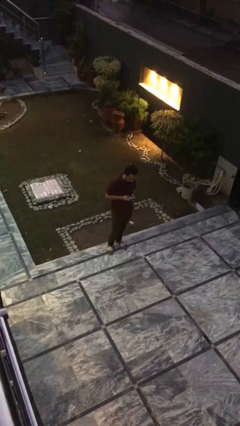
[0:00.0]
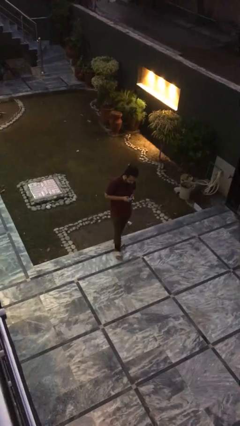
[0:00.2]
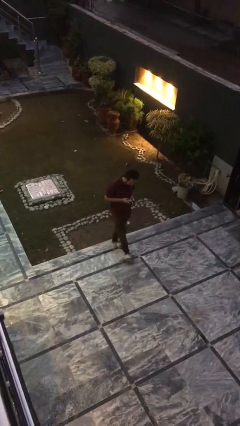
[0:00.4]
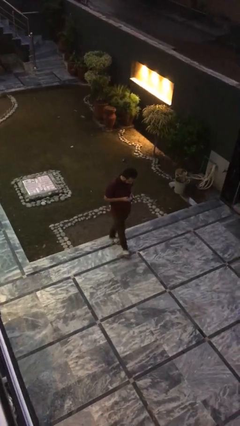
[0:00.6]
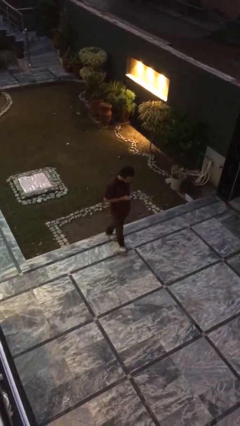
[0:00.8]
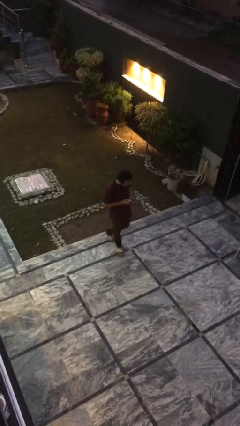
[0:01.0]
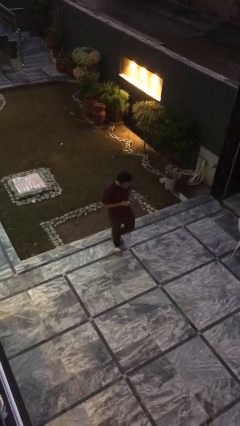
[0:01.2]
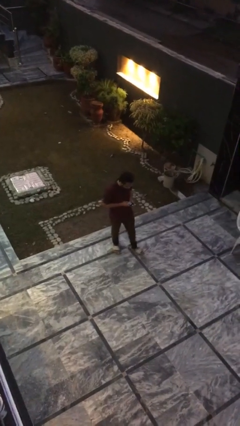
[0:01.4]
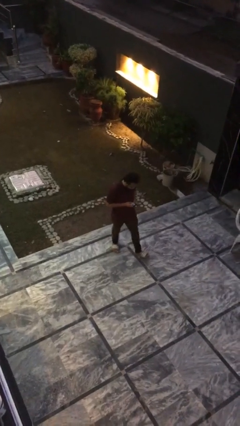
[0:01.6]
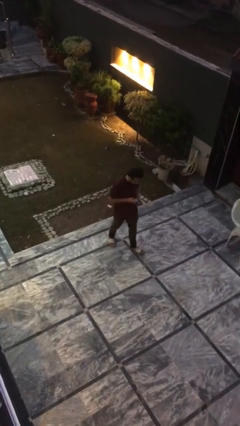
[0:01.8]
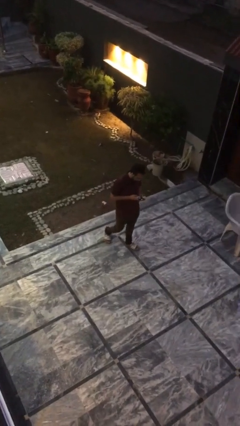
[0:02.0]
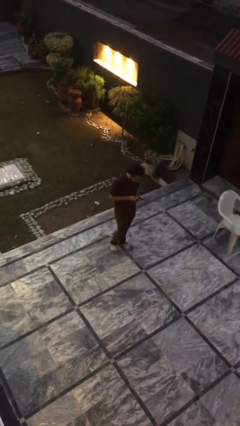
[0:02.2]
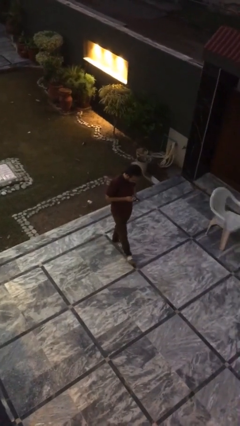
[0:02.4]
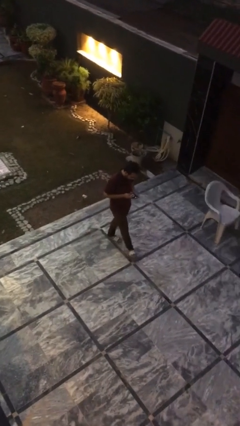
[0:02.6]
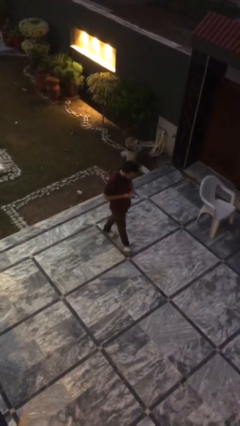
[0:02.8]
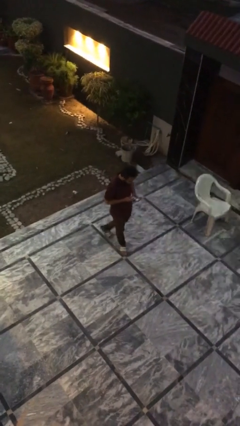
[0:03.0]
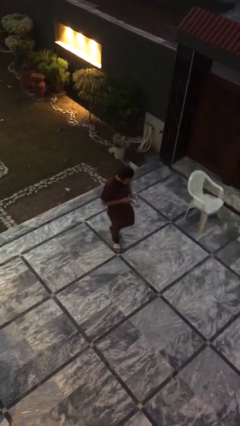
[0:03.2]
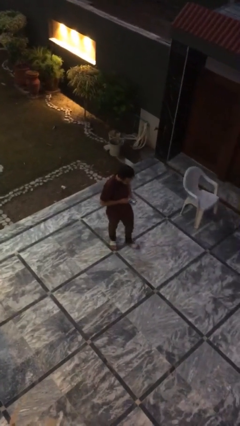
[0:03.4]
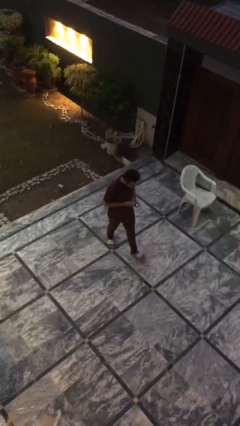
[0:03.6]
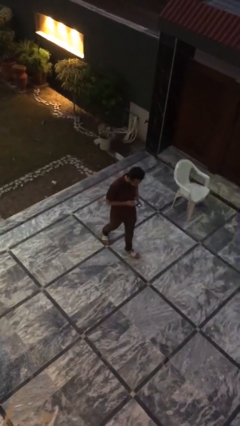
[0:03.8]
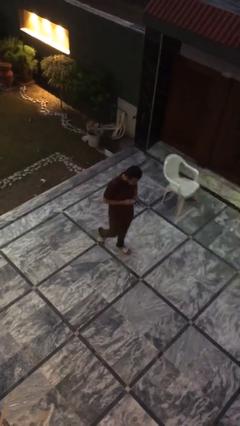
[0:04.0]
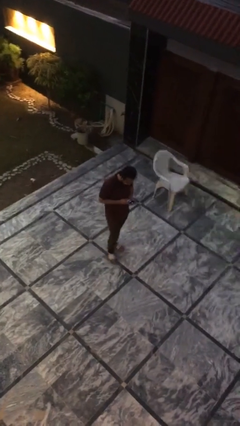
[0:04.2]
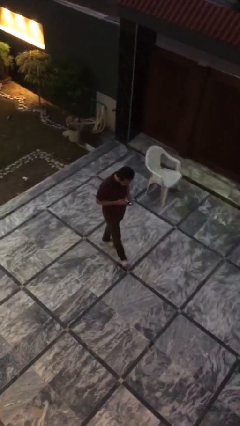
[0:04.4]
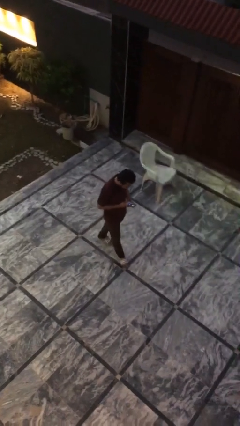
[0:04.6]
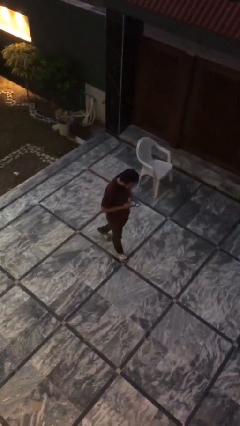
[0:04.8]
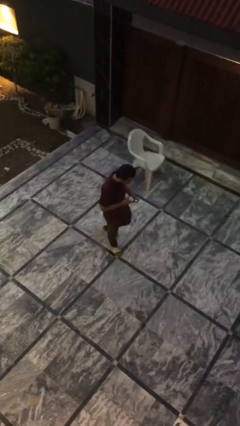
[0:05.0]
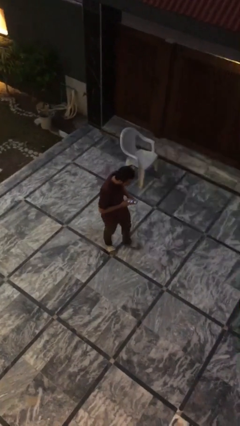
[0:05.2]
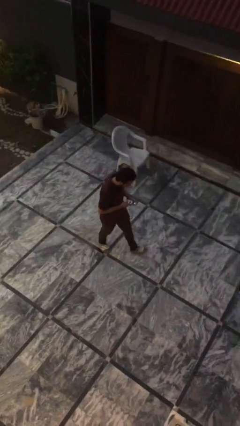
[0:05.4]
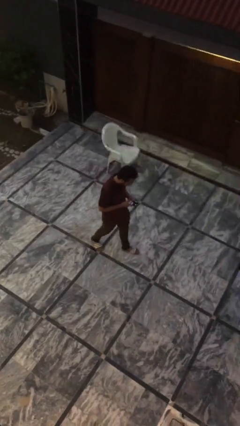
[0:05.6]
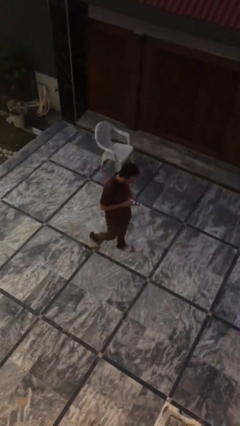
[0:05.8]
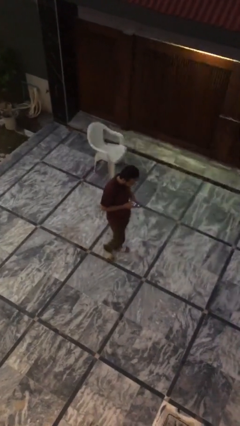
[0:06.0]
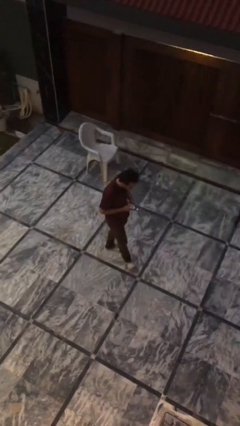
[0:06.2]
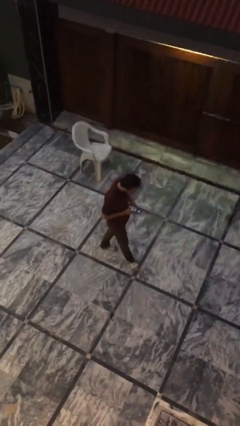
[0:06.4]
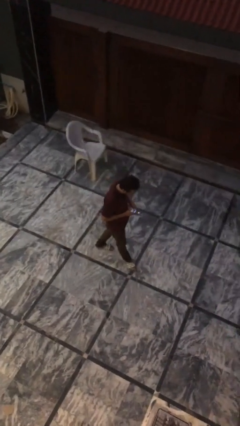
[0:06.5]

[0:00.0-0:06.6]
person texts on phone

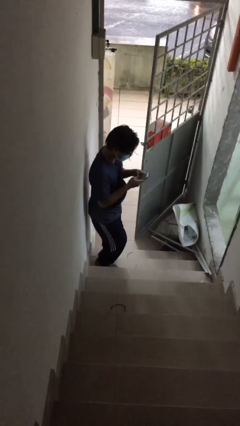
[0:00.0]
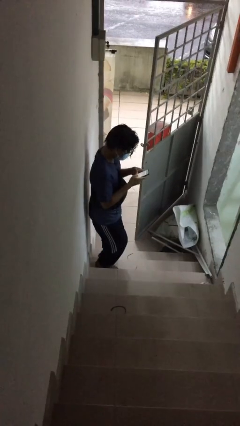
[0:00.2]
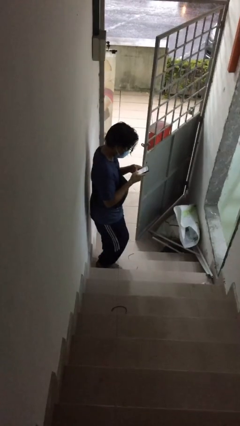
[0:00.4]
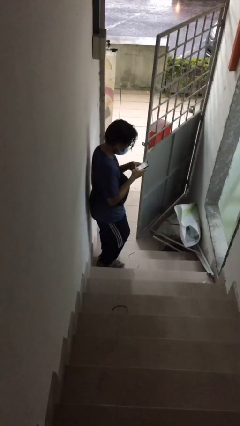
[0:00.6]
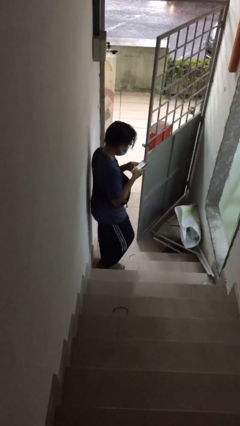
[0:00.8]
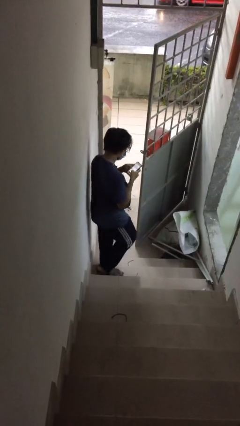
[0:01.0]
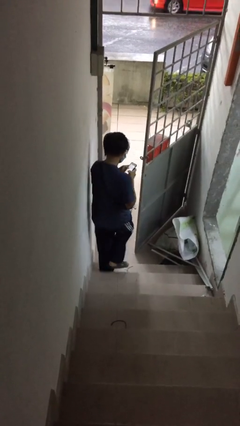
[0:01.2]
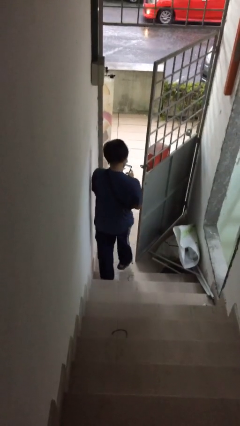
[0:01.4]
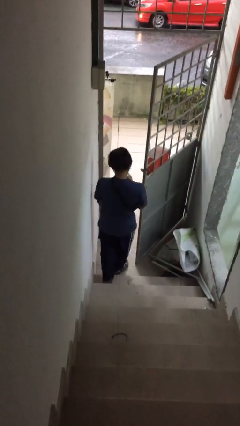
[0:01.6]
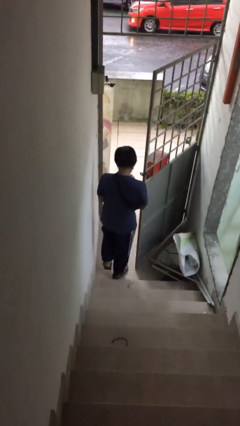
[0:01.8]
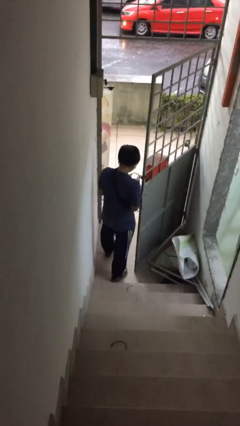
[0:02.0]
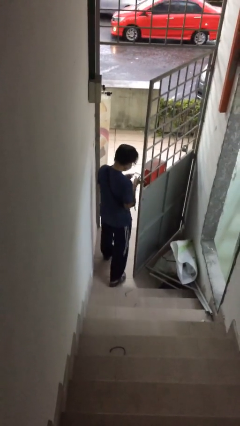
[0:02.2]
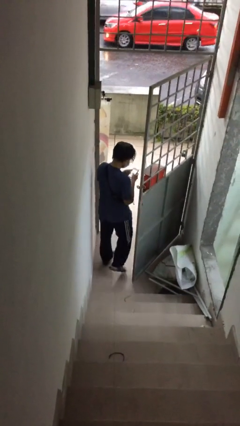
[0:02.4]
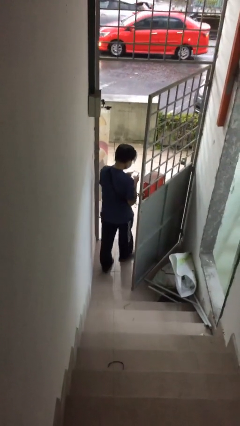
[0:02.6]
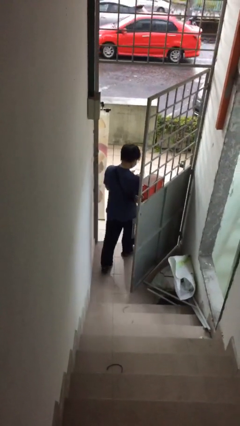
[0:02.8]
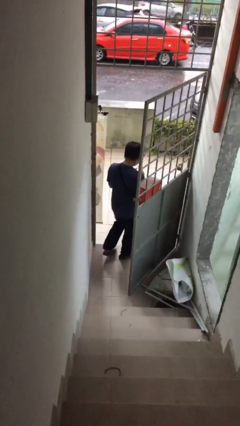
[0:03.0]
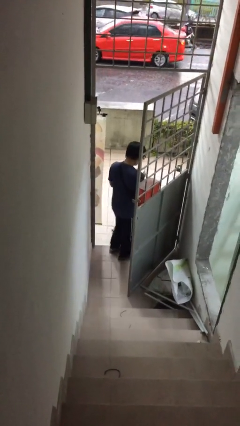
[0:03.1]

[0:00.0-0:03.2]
person exits scene through structure

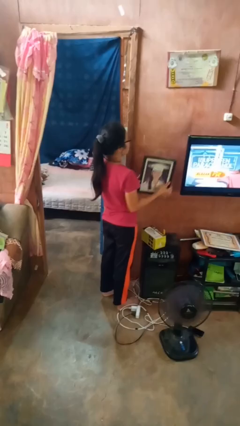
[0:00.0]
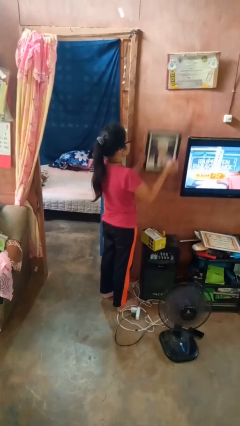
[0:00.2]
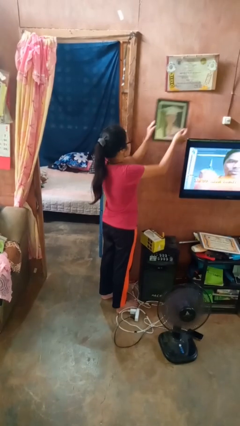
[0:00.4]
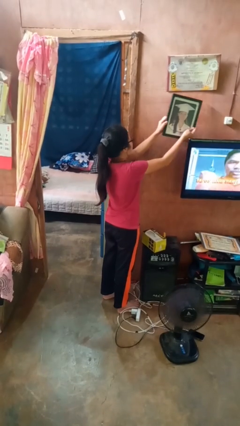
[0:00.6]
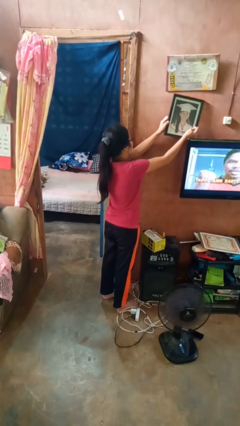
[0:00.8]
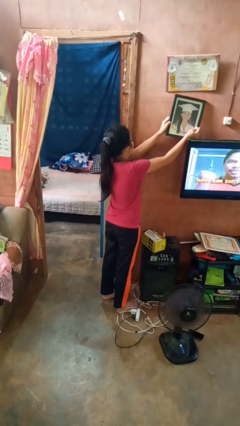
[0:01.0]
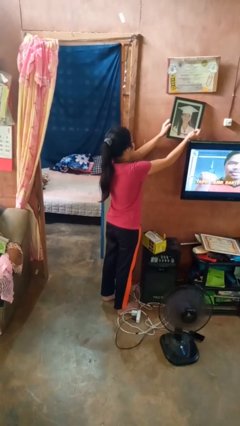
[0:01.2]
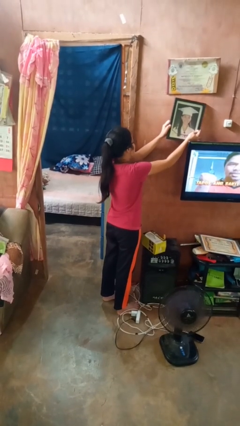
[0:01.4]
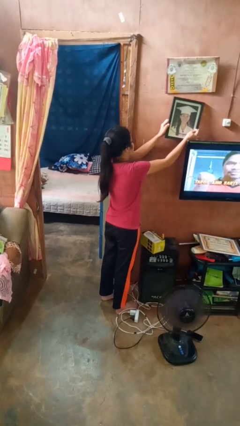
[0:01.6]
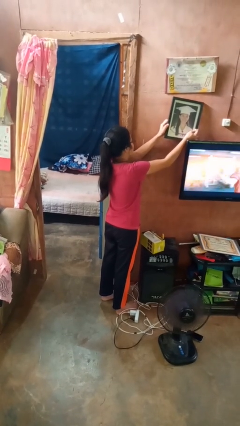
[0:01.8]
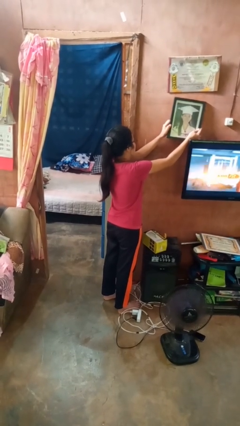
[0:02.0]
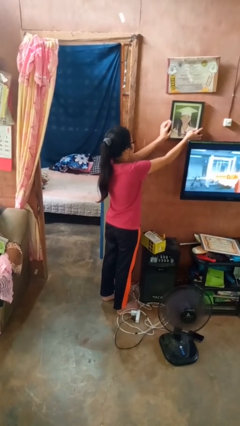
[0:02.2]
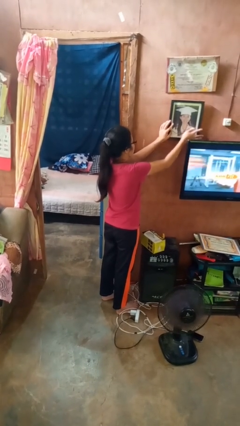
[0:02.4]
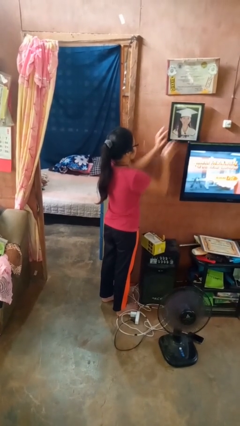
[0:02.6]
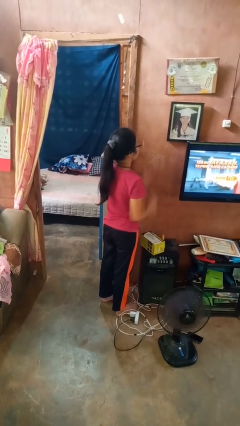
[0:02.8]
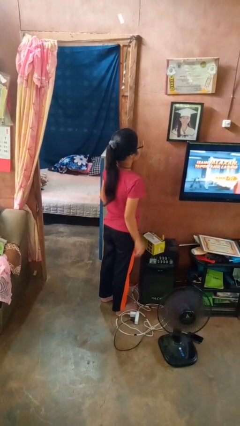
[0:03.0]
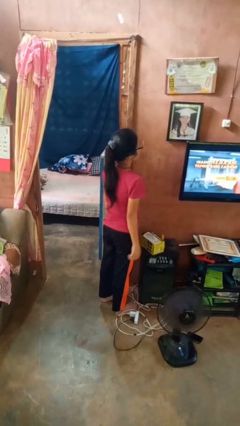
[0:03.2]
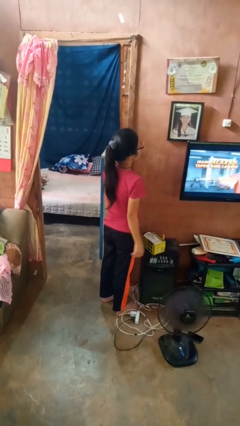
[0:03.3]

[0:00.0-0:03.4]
person puts up picture frame

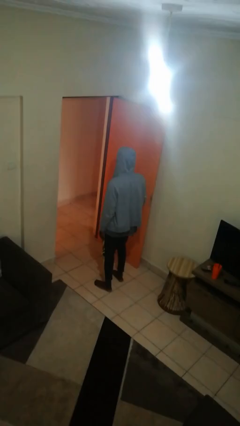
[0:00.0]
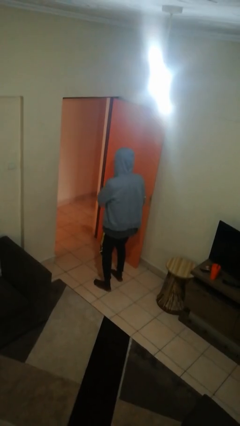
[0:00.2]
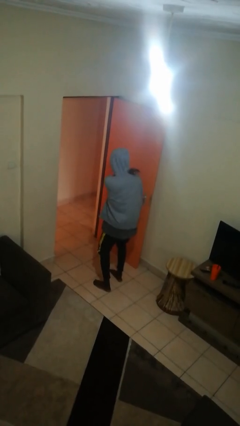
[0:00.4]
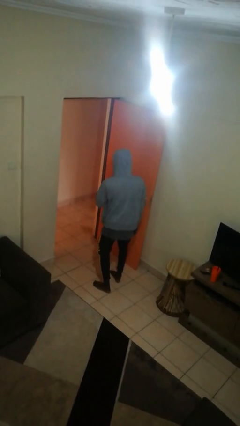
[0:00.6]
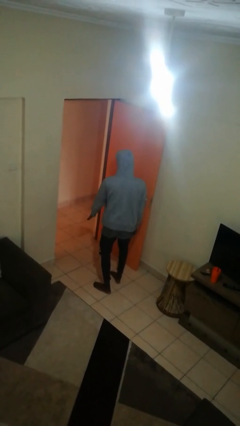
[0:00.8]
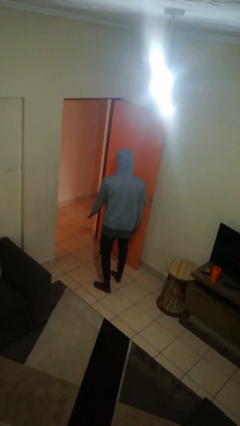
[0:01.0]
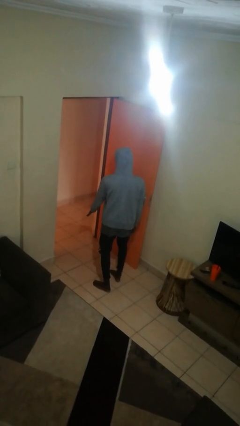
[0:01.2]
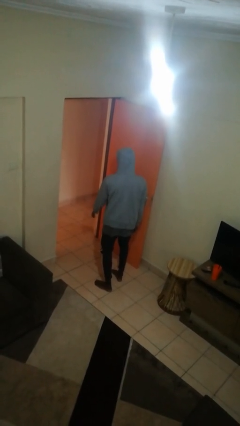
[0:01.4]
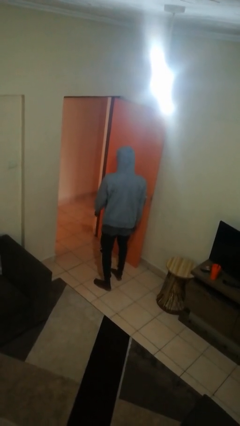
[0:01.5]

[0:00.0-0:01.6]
person karate chop

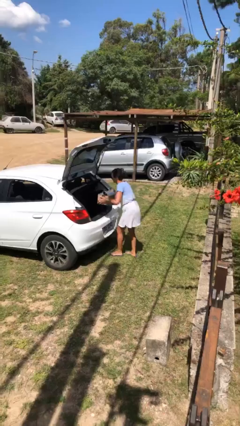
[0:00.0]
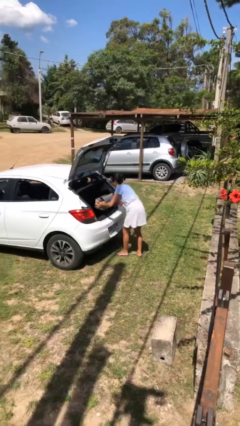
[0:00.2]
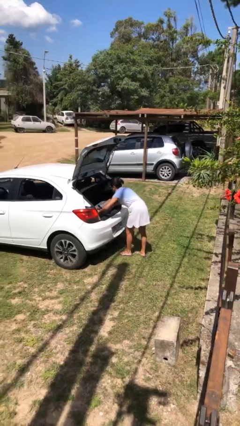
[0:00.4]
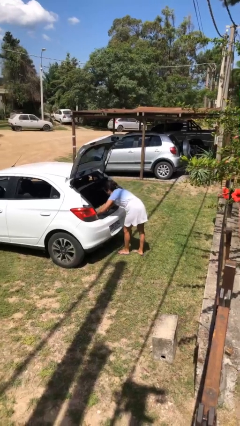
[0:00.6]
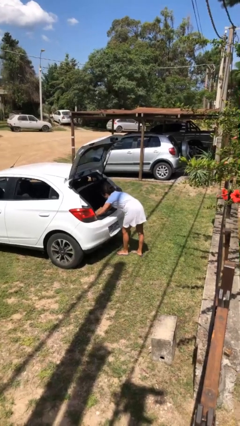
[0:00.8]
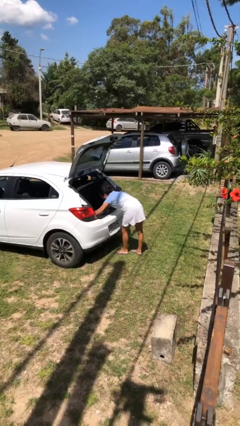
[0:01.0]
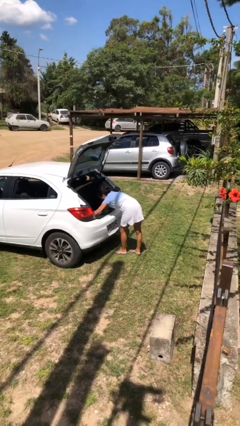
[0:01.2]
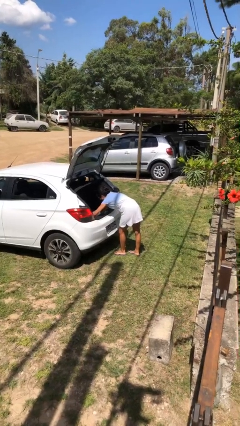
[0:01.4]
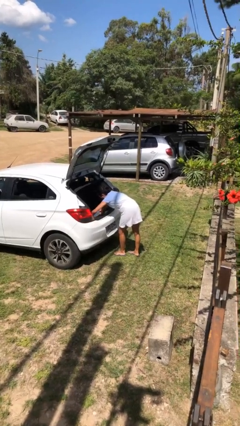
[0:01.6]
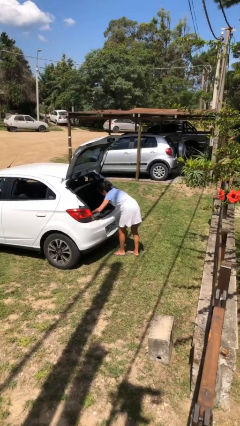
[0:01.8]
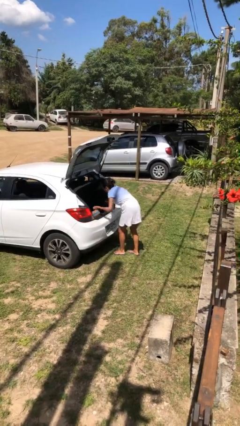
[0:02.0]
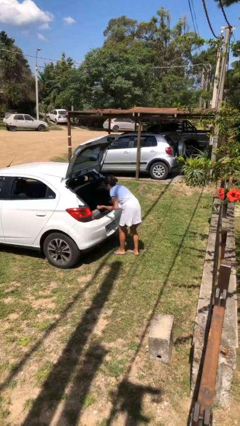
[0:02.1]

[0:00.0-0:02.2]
person loads car

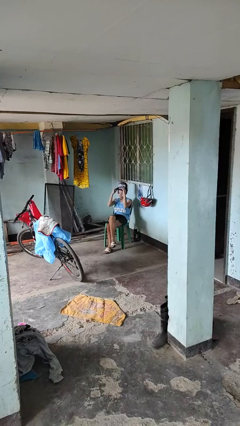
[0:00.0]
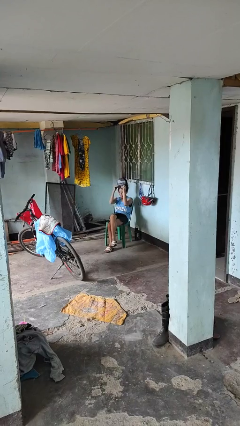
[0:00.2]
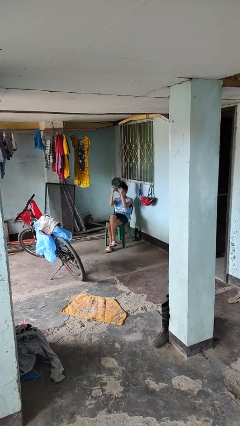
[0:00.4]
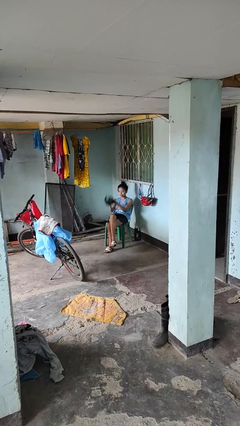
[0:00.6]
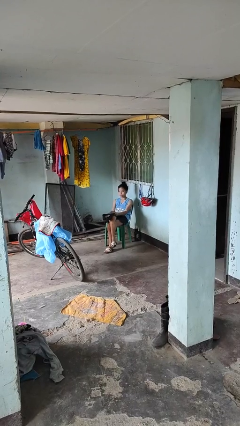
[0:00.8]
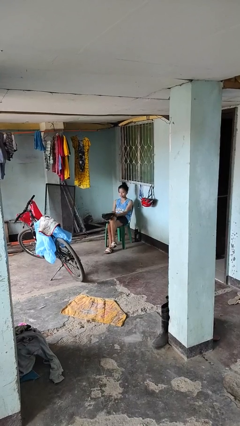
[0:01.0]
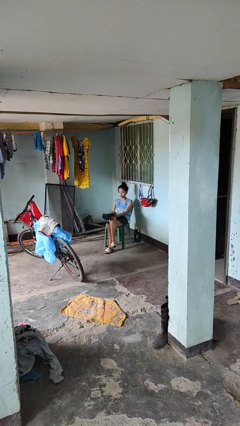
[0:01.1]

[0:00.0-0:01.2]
person takes off hat
